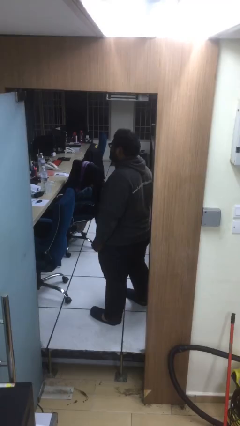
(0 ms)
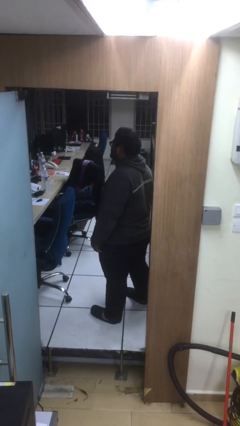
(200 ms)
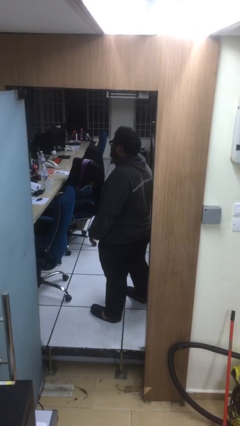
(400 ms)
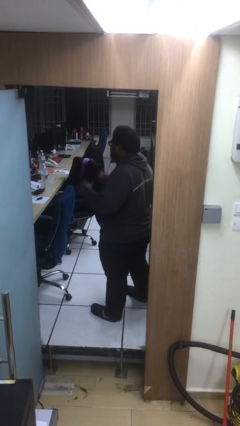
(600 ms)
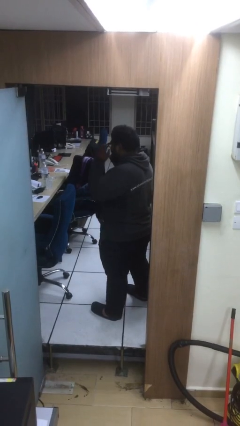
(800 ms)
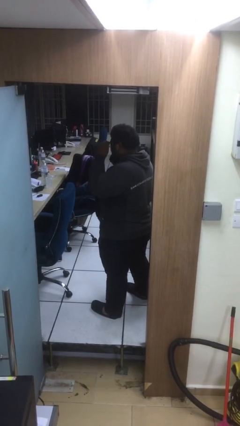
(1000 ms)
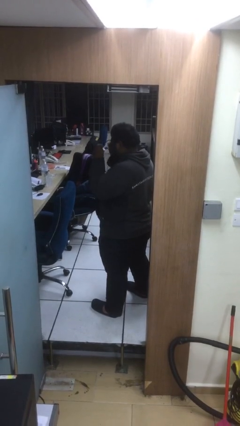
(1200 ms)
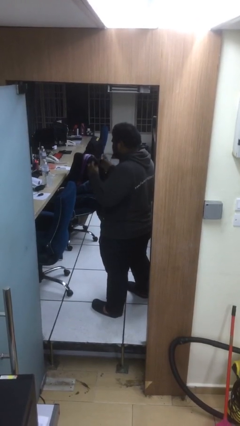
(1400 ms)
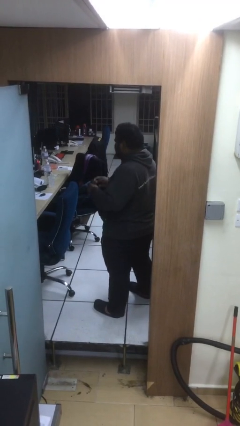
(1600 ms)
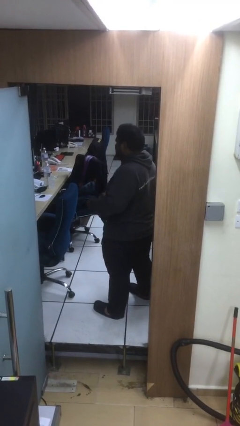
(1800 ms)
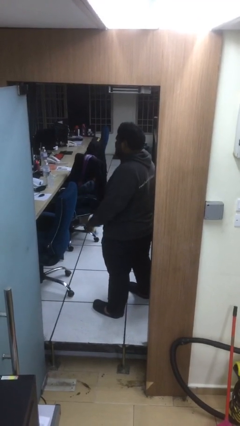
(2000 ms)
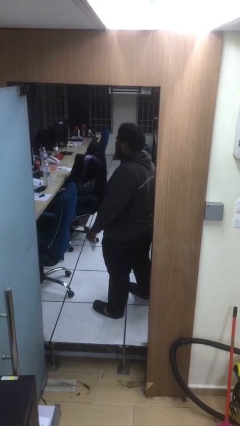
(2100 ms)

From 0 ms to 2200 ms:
person takes off glasses

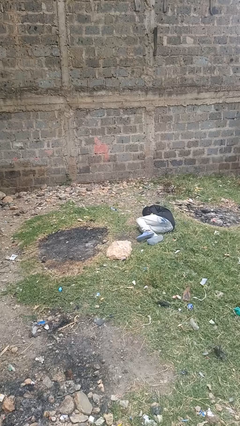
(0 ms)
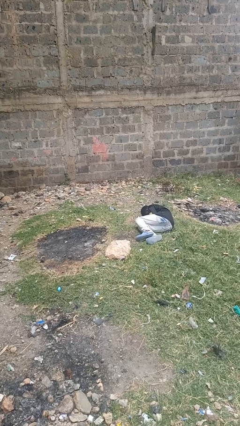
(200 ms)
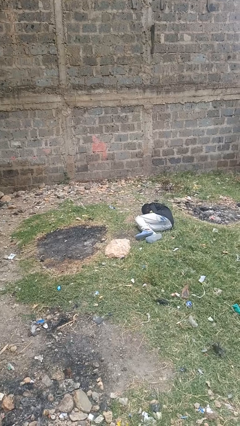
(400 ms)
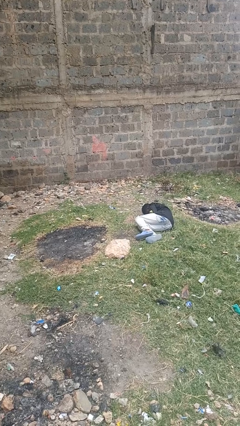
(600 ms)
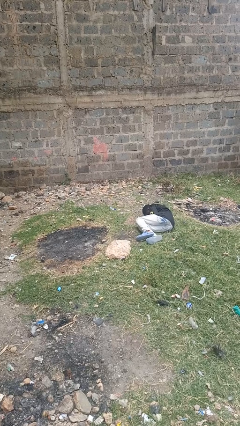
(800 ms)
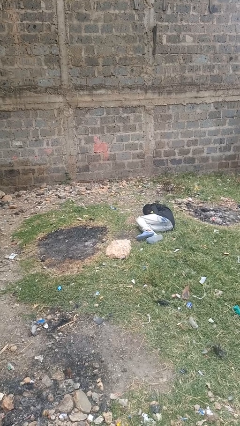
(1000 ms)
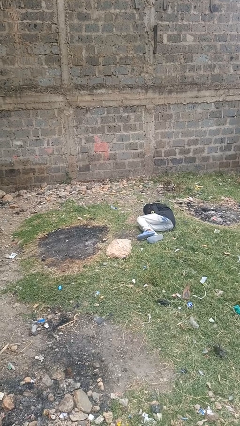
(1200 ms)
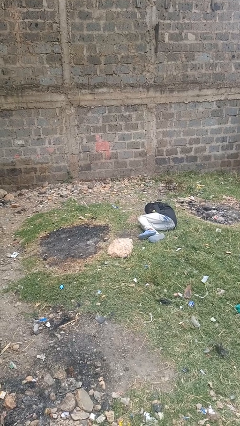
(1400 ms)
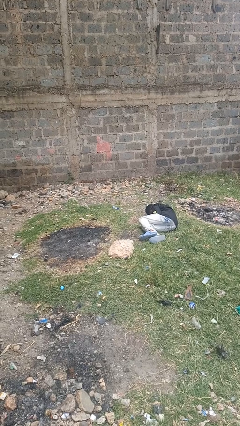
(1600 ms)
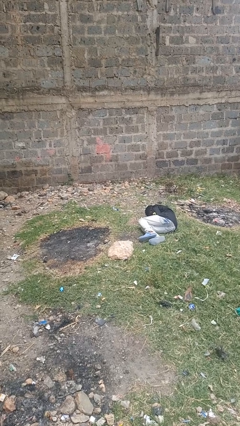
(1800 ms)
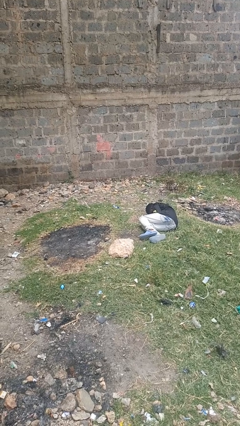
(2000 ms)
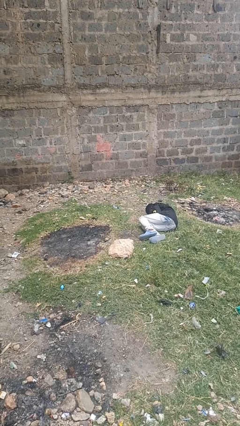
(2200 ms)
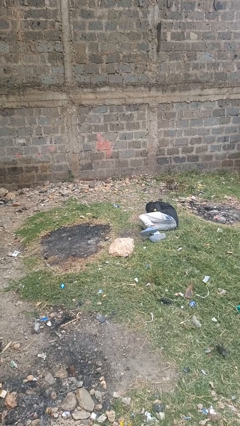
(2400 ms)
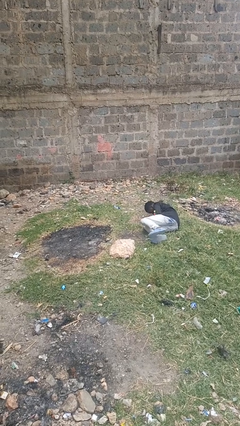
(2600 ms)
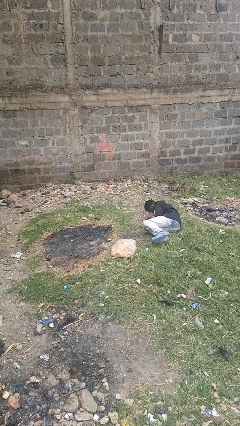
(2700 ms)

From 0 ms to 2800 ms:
person lies down on floor

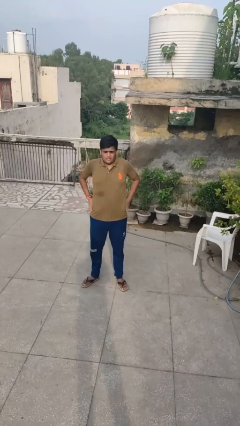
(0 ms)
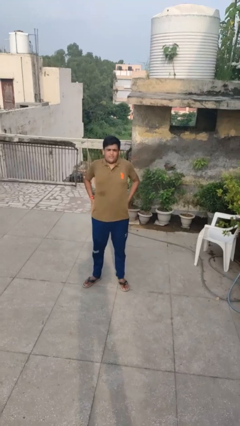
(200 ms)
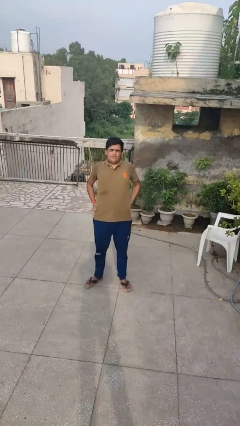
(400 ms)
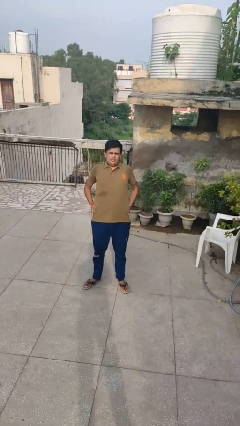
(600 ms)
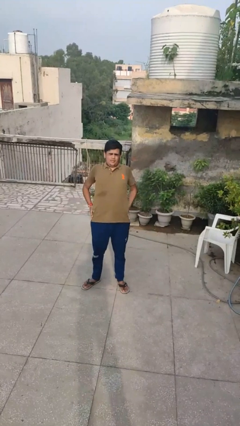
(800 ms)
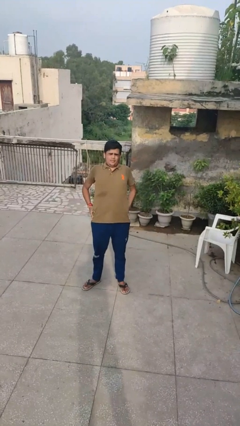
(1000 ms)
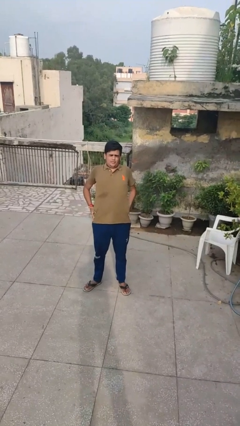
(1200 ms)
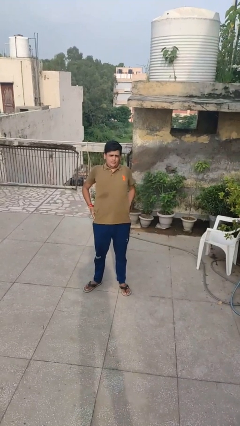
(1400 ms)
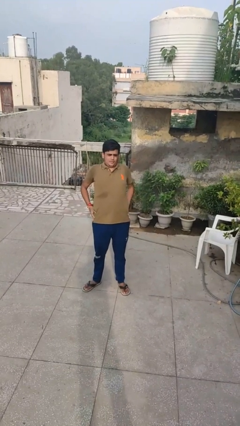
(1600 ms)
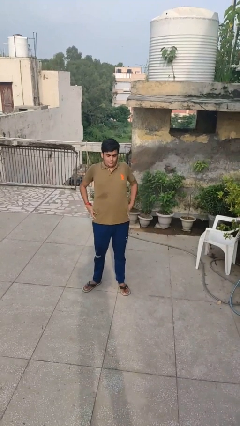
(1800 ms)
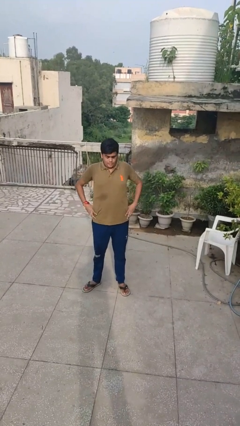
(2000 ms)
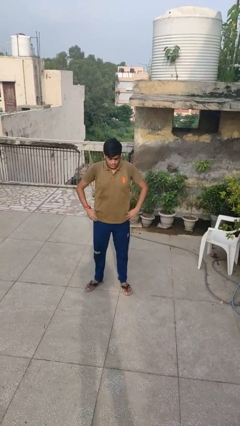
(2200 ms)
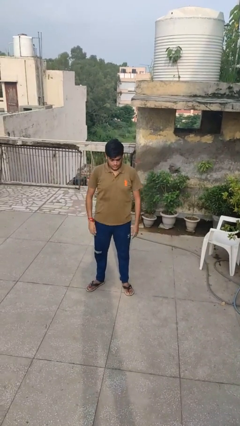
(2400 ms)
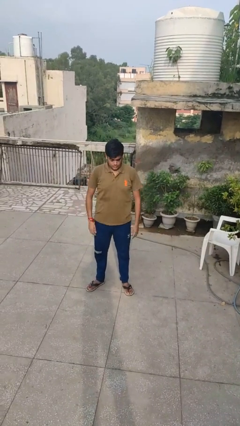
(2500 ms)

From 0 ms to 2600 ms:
person stretches back

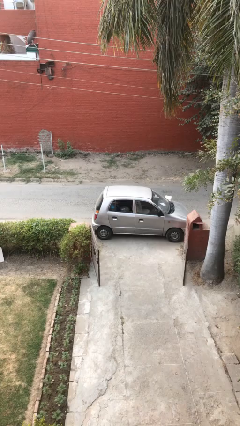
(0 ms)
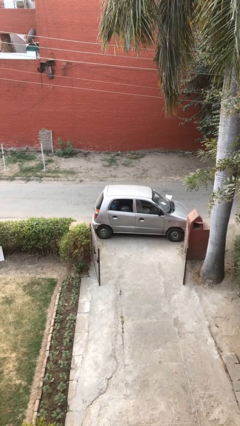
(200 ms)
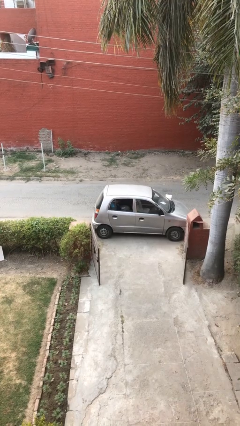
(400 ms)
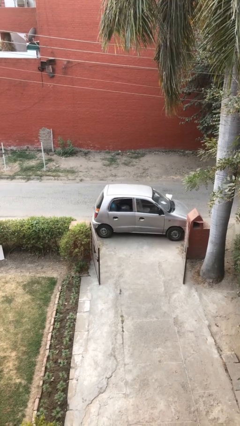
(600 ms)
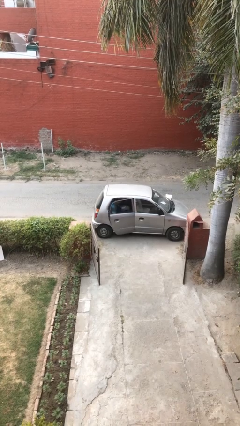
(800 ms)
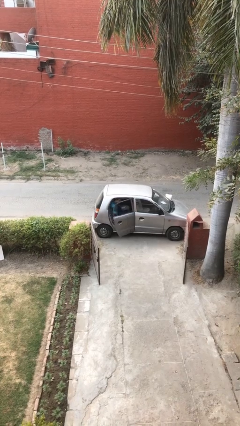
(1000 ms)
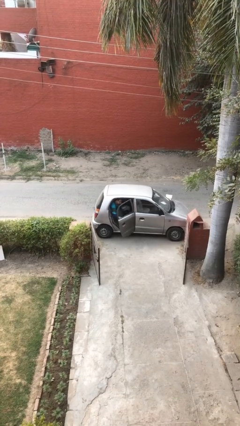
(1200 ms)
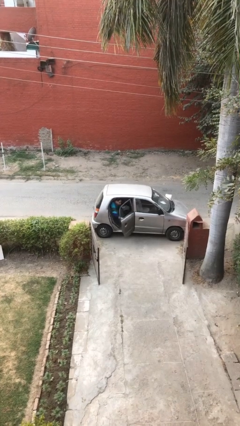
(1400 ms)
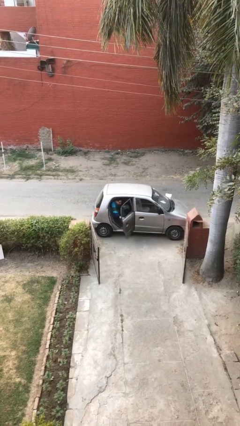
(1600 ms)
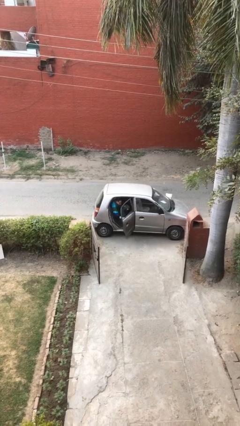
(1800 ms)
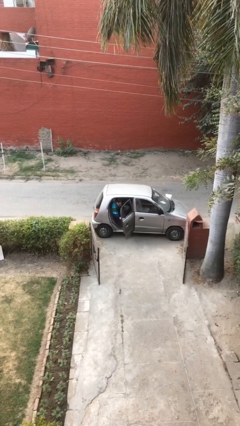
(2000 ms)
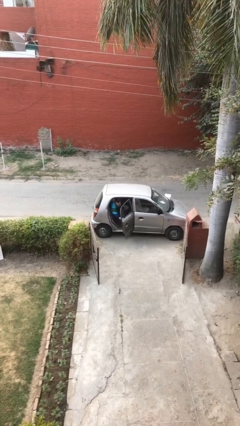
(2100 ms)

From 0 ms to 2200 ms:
person opens car door

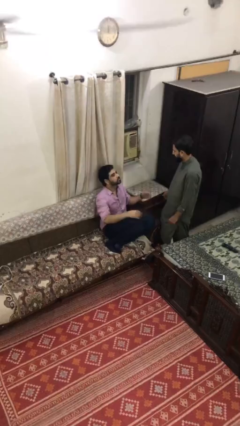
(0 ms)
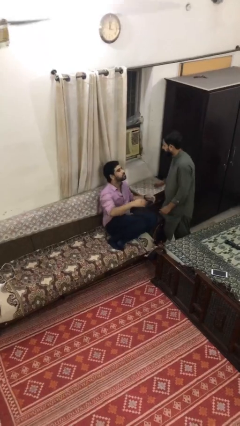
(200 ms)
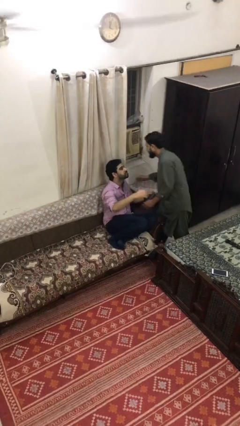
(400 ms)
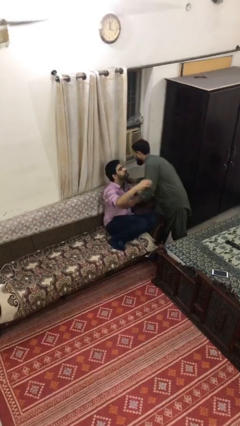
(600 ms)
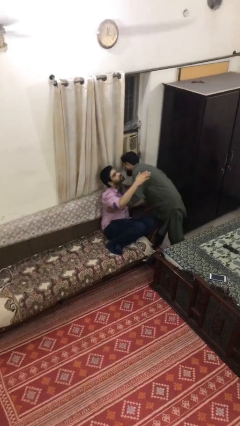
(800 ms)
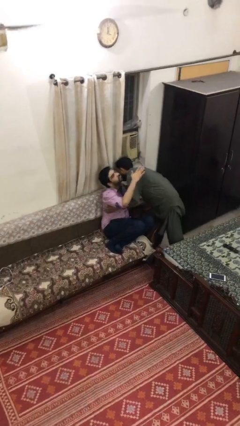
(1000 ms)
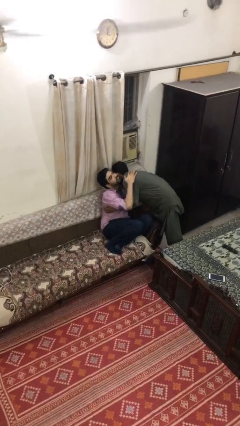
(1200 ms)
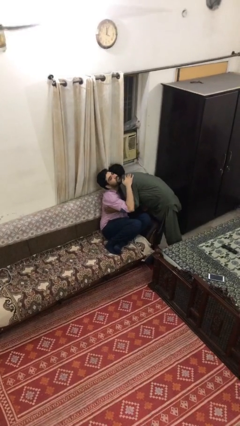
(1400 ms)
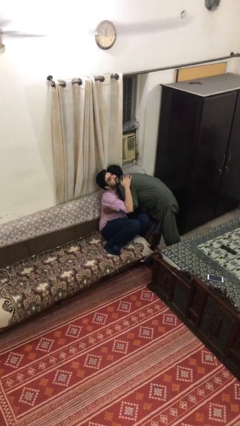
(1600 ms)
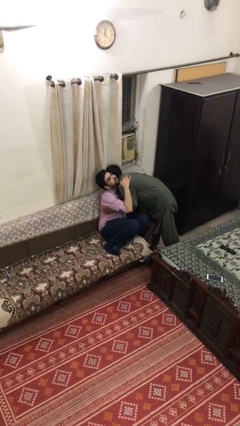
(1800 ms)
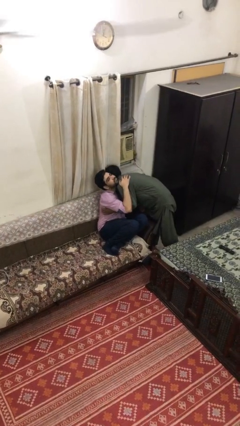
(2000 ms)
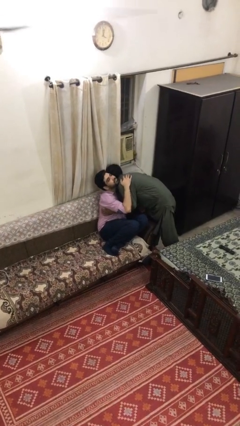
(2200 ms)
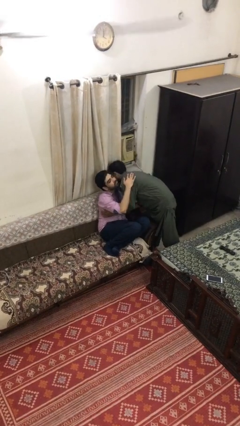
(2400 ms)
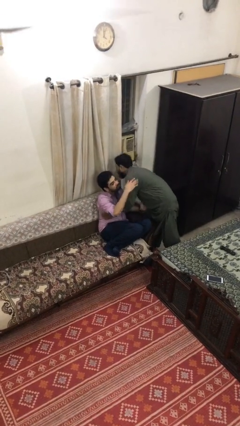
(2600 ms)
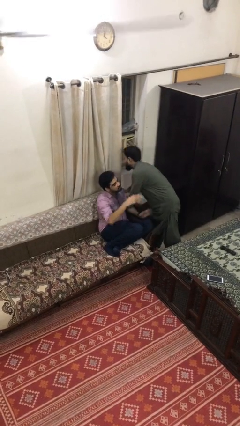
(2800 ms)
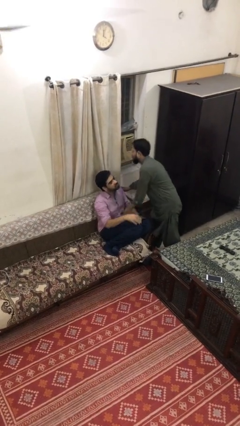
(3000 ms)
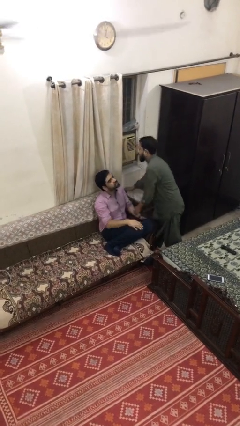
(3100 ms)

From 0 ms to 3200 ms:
person embraces person

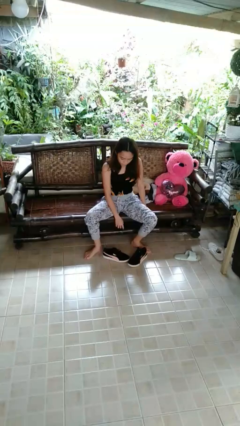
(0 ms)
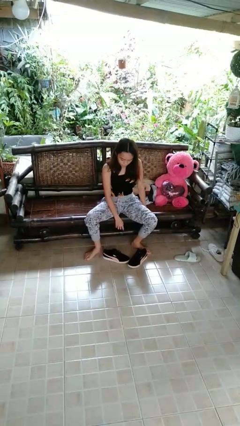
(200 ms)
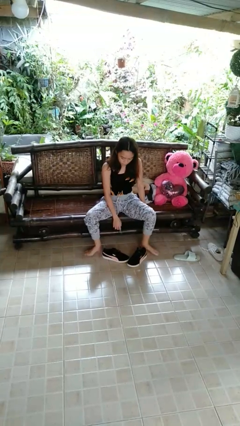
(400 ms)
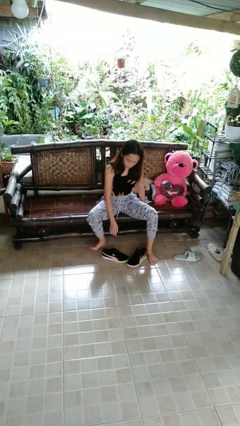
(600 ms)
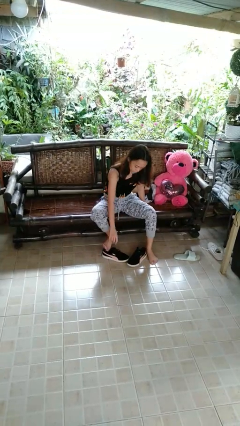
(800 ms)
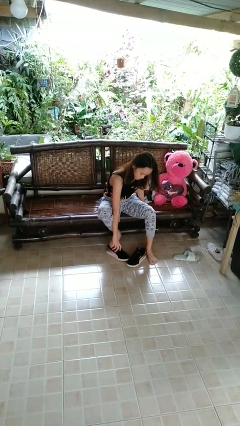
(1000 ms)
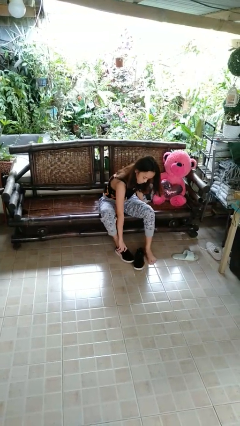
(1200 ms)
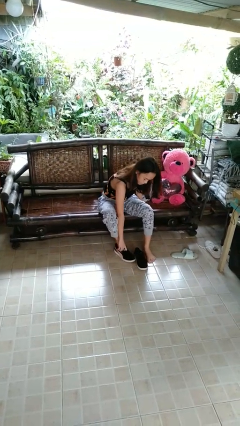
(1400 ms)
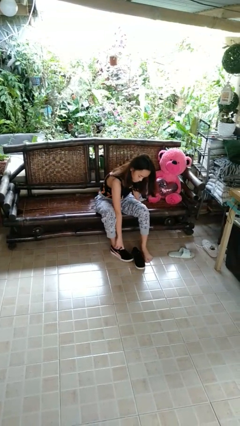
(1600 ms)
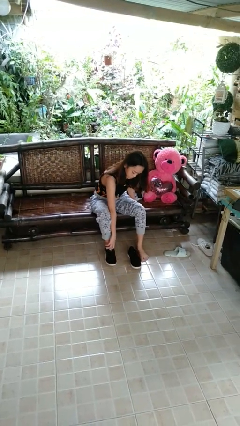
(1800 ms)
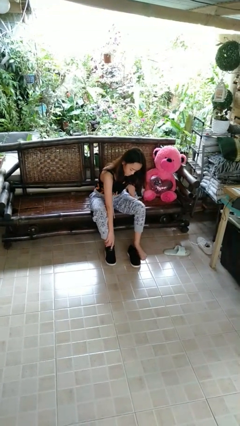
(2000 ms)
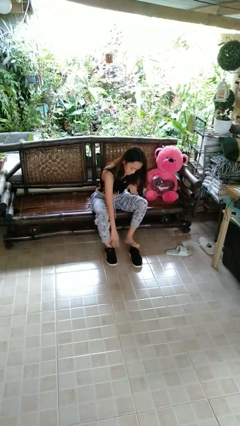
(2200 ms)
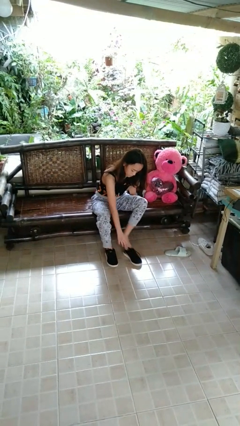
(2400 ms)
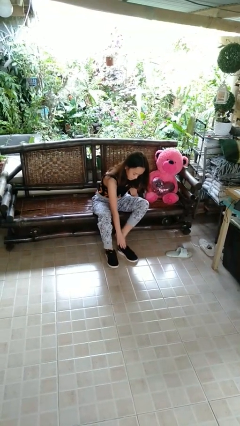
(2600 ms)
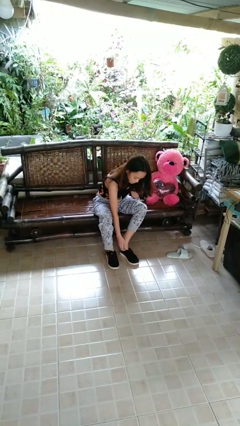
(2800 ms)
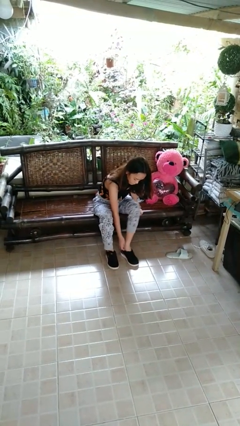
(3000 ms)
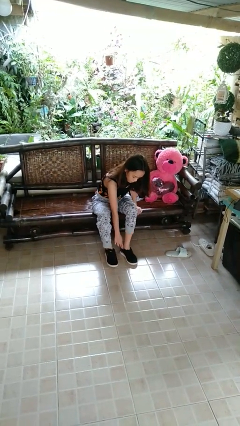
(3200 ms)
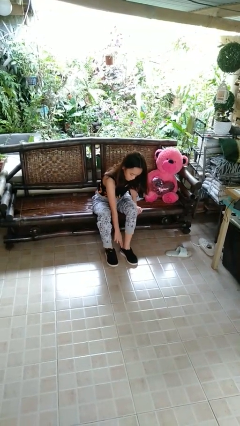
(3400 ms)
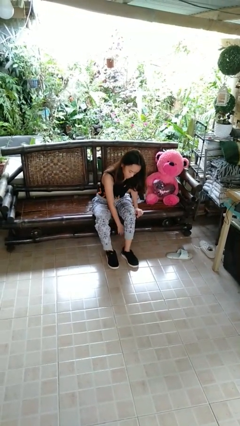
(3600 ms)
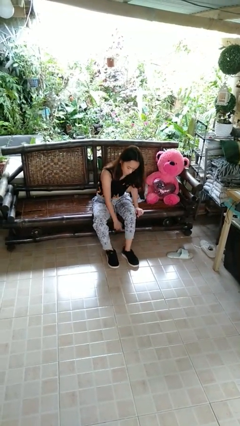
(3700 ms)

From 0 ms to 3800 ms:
person puts on shoes
